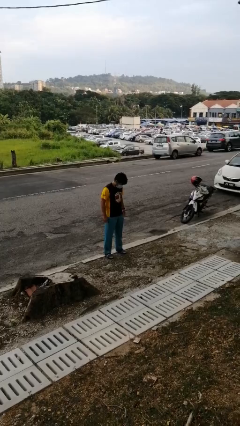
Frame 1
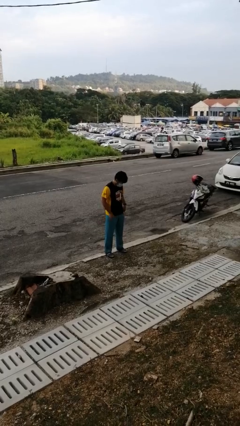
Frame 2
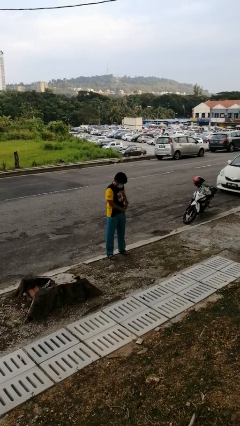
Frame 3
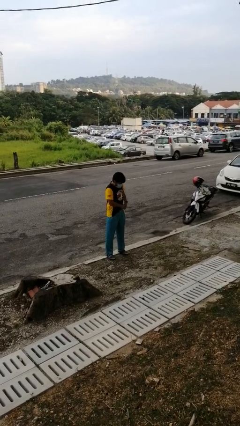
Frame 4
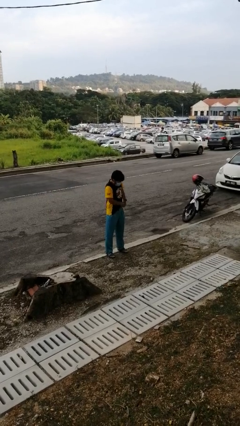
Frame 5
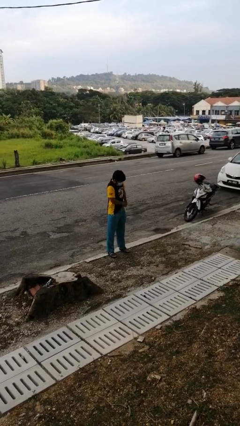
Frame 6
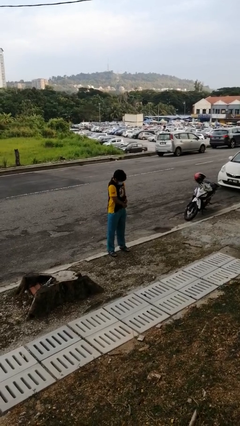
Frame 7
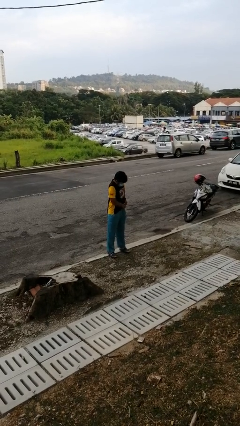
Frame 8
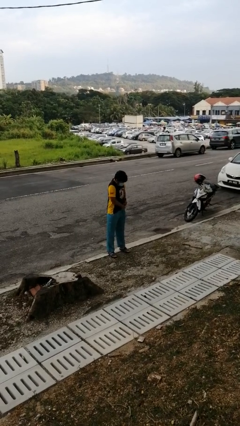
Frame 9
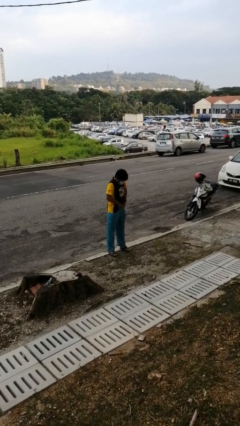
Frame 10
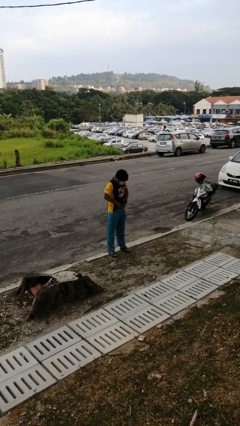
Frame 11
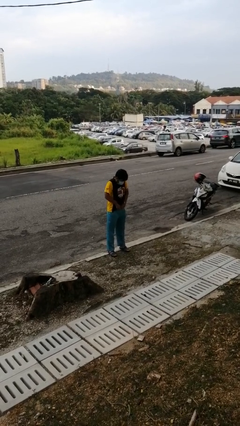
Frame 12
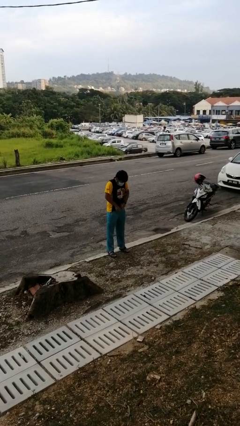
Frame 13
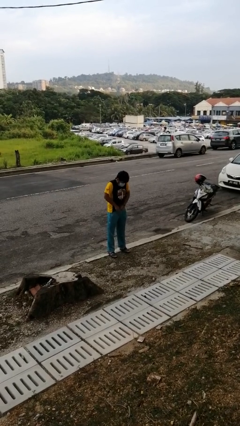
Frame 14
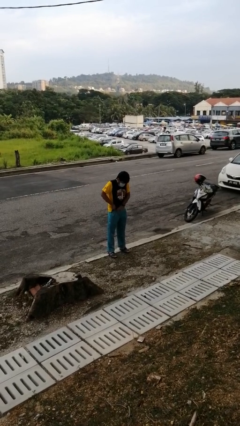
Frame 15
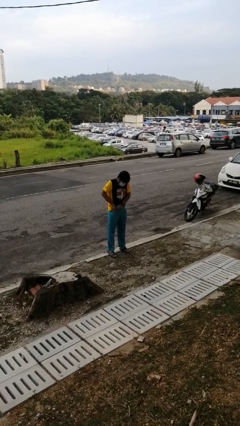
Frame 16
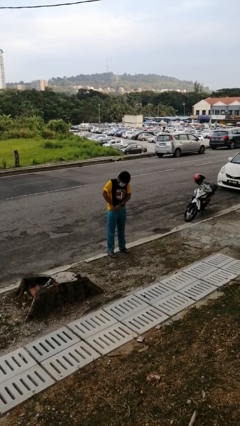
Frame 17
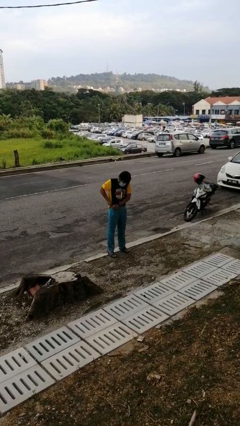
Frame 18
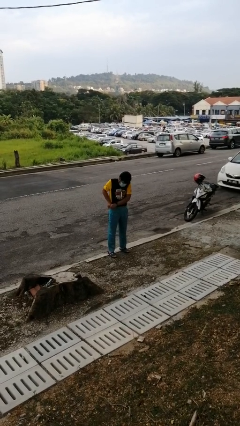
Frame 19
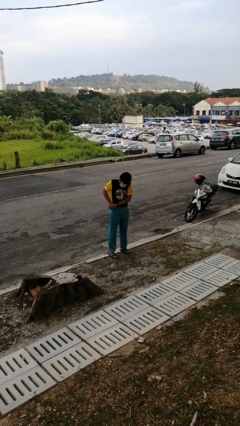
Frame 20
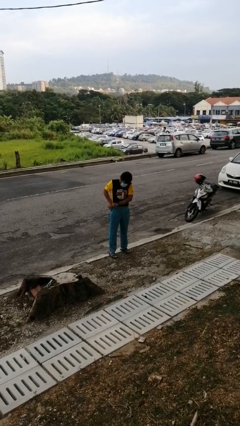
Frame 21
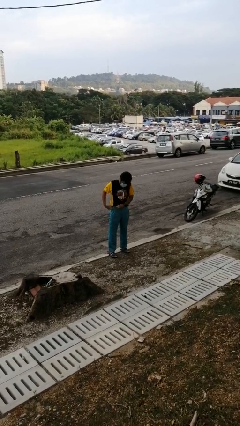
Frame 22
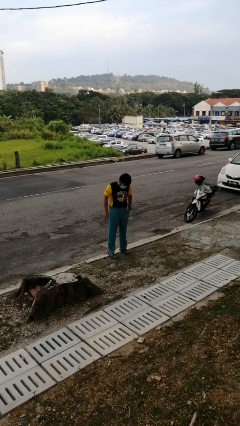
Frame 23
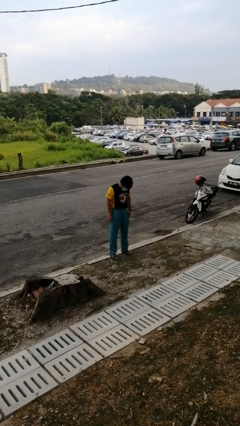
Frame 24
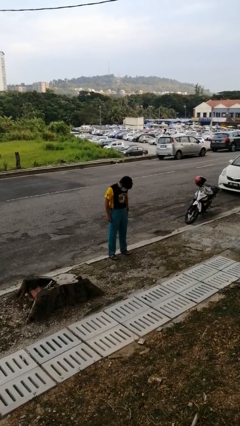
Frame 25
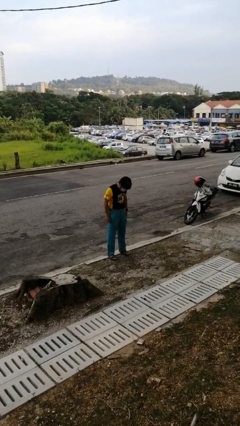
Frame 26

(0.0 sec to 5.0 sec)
person tucks in shirt

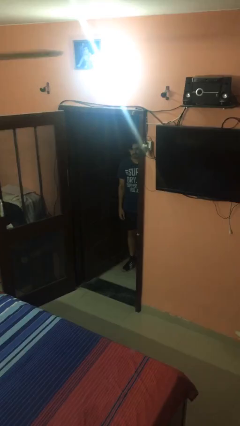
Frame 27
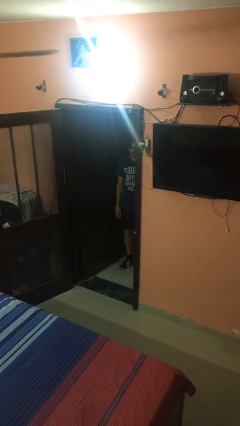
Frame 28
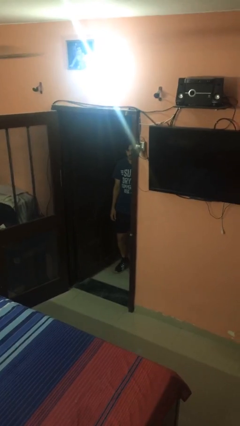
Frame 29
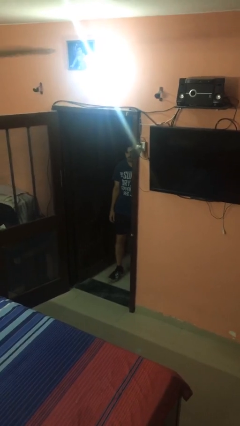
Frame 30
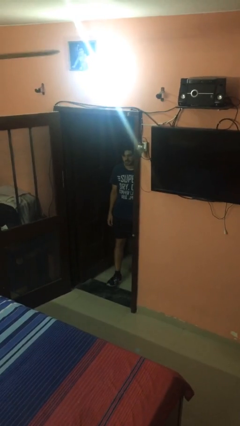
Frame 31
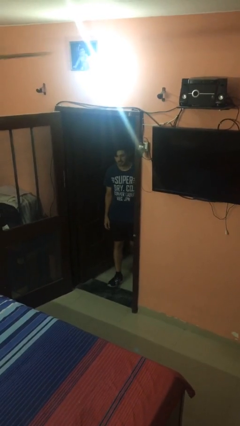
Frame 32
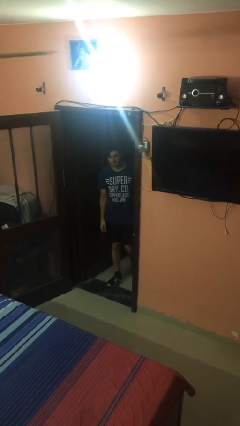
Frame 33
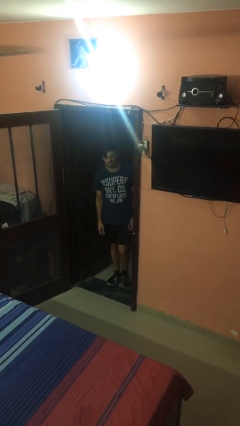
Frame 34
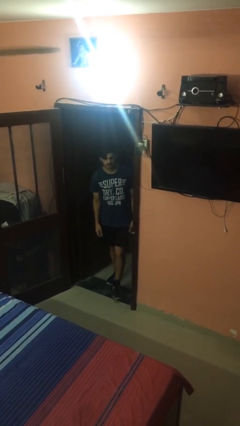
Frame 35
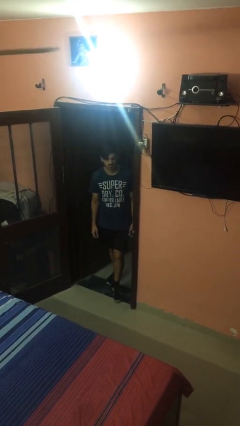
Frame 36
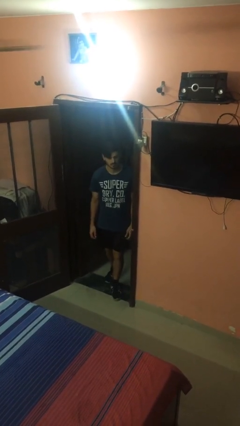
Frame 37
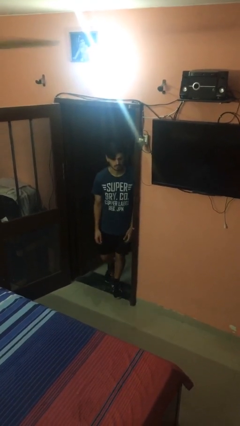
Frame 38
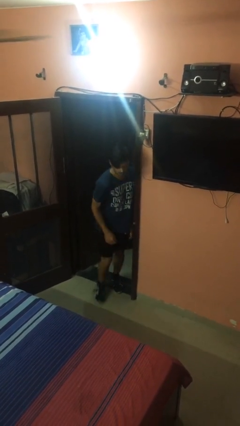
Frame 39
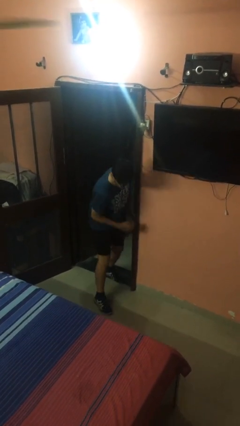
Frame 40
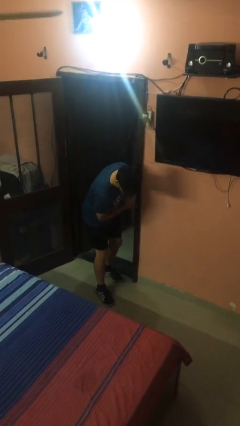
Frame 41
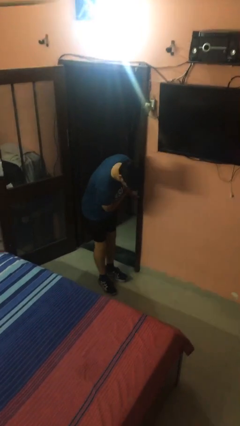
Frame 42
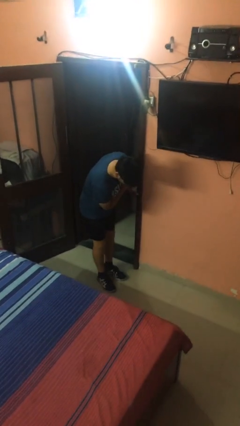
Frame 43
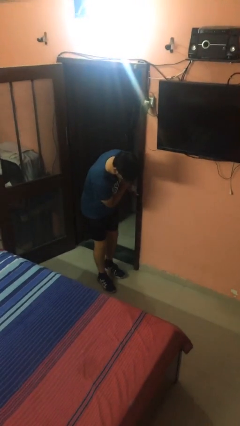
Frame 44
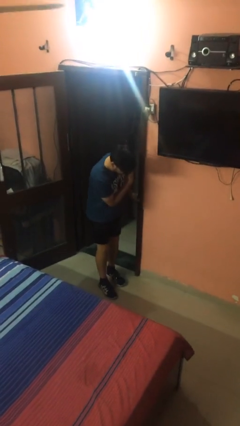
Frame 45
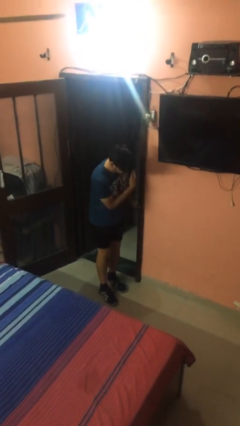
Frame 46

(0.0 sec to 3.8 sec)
person bumps into wall

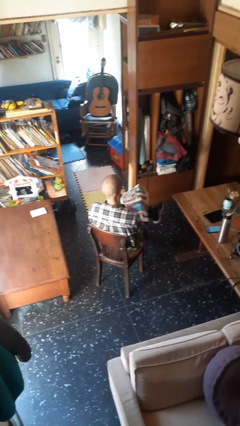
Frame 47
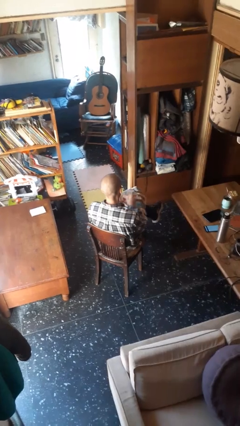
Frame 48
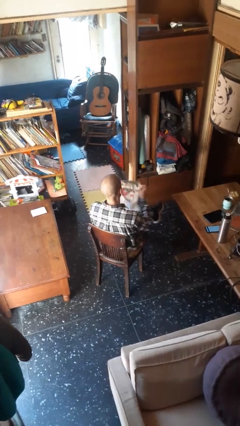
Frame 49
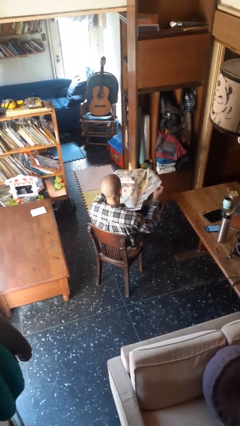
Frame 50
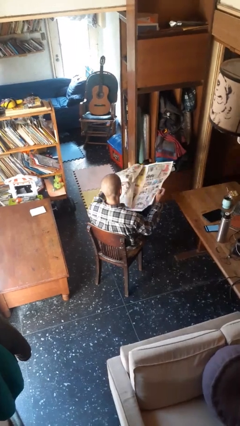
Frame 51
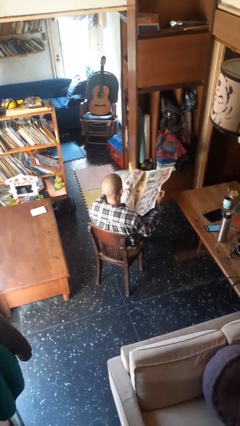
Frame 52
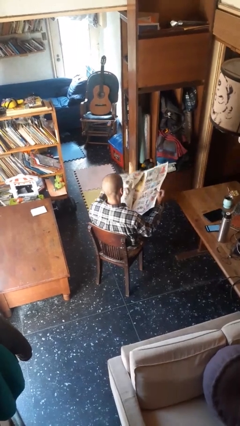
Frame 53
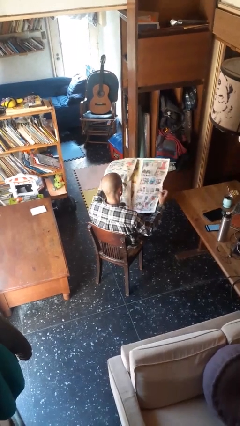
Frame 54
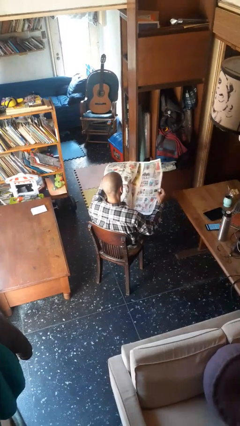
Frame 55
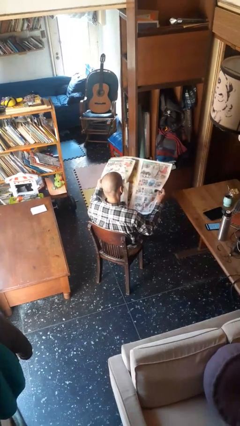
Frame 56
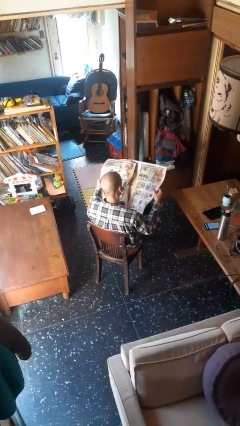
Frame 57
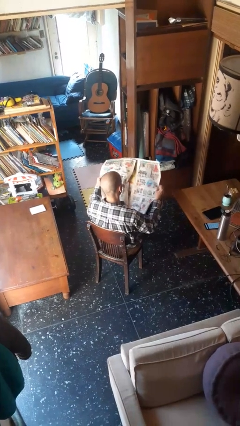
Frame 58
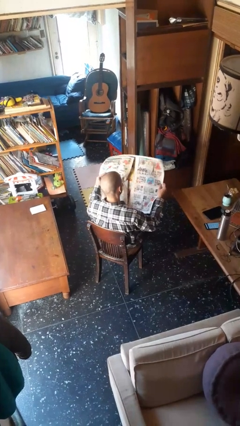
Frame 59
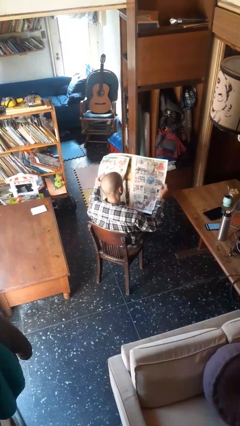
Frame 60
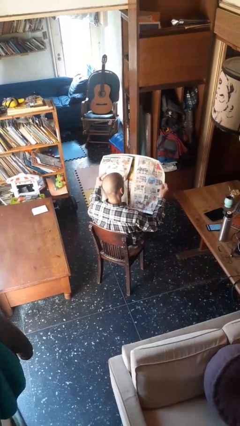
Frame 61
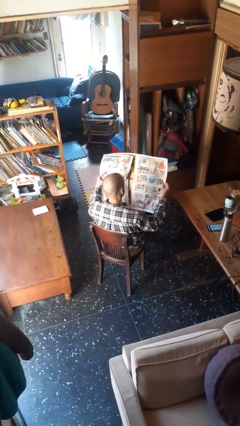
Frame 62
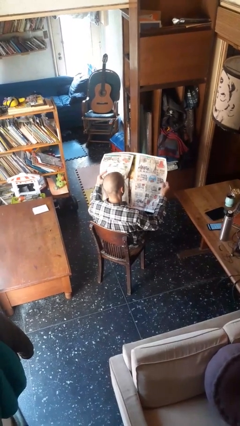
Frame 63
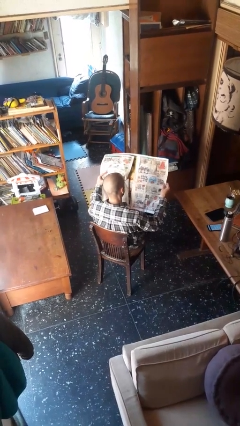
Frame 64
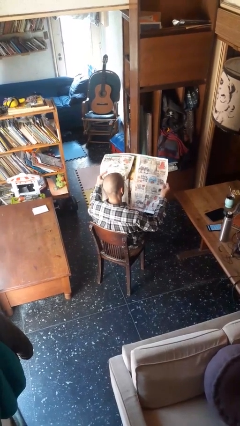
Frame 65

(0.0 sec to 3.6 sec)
person reads newspaper

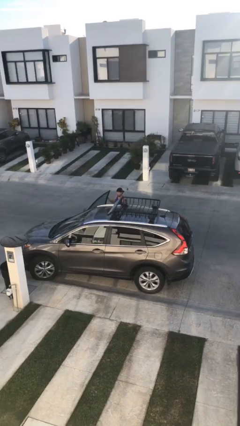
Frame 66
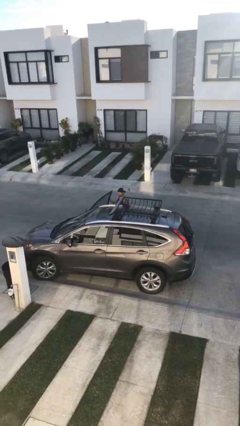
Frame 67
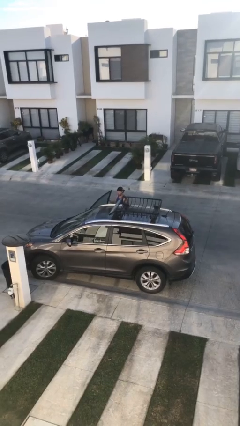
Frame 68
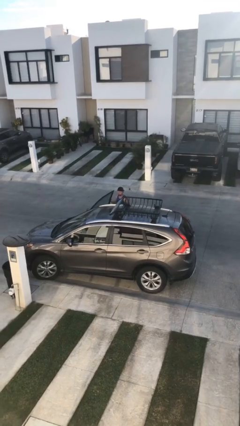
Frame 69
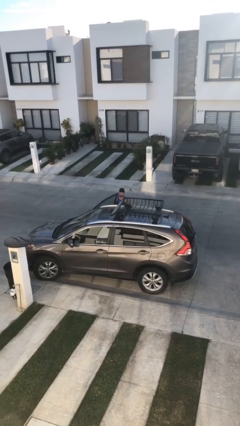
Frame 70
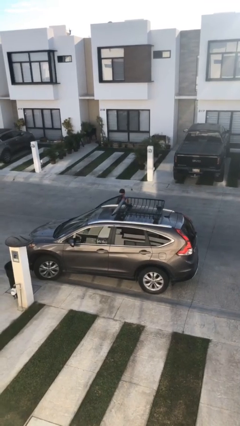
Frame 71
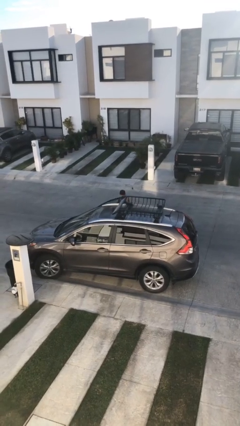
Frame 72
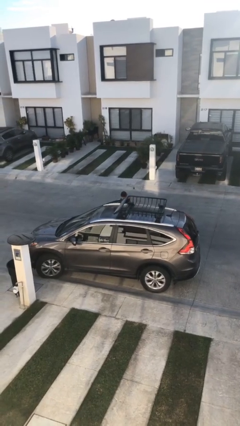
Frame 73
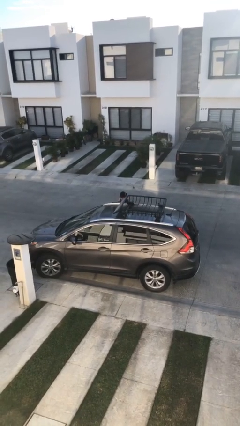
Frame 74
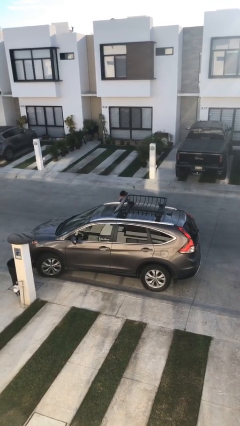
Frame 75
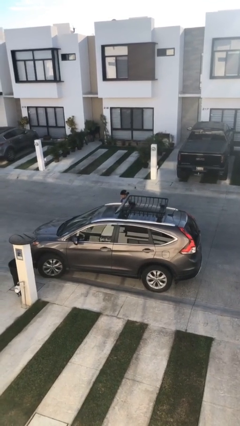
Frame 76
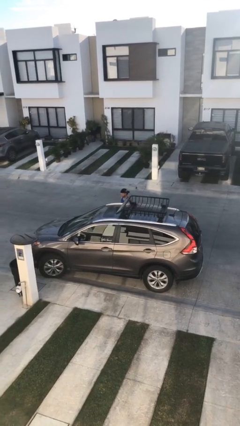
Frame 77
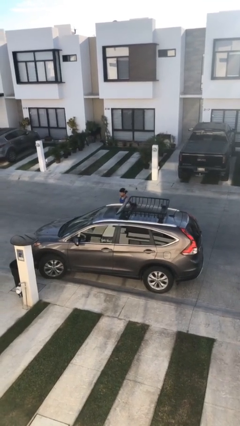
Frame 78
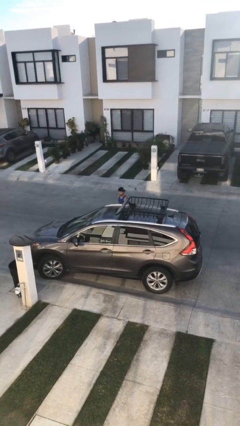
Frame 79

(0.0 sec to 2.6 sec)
person closes car door

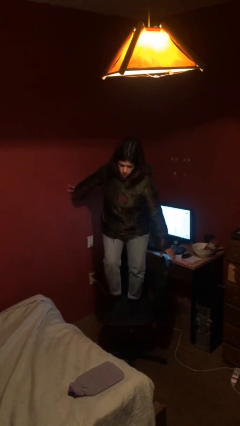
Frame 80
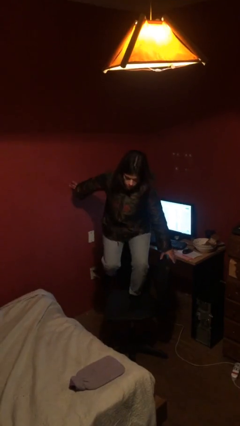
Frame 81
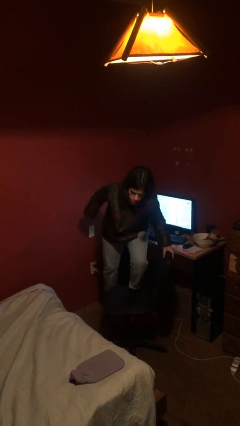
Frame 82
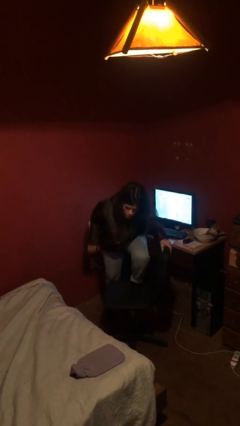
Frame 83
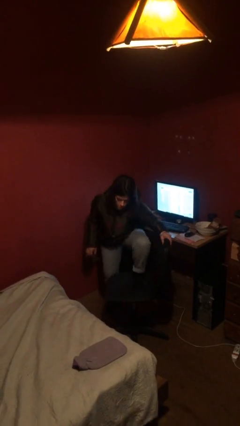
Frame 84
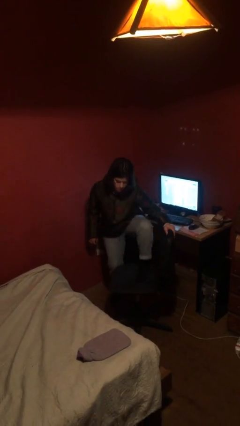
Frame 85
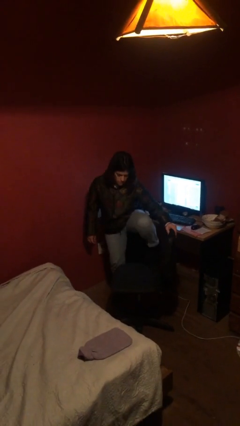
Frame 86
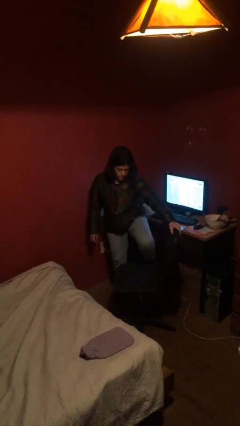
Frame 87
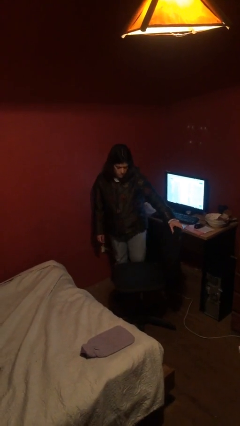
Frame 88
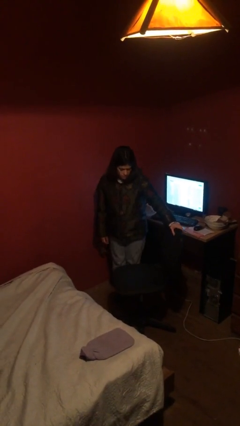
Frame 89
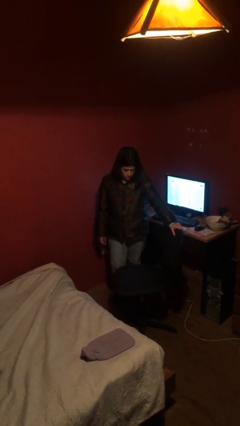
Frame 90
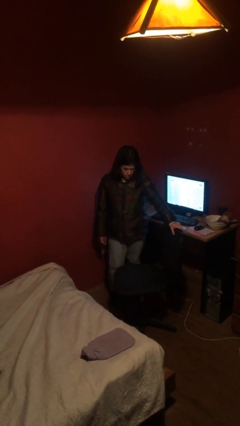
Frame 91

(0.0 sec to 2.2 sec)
person climbs off chair
